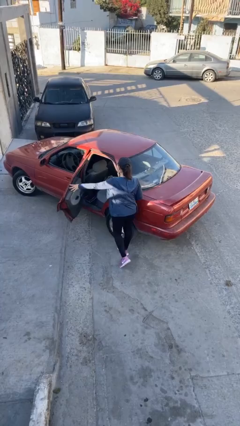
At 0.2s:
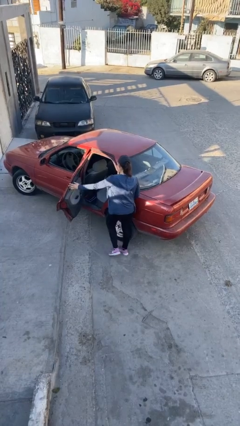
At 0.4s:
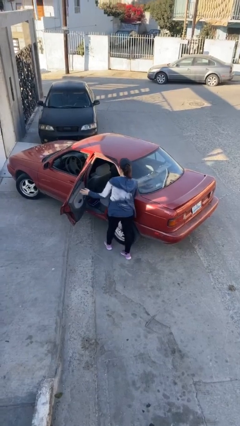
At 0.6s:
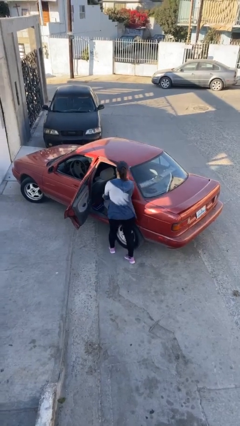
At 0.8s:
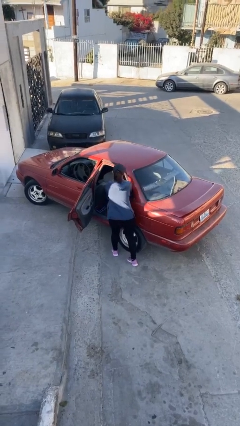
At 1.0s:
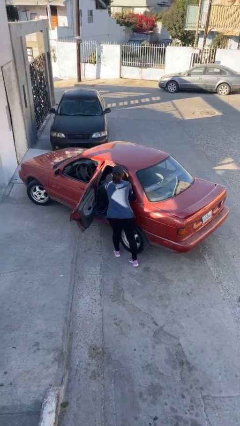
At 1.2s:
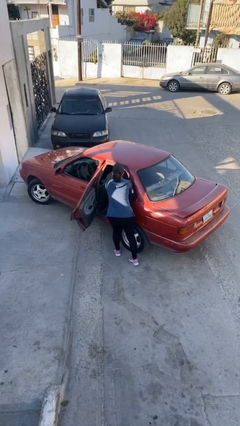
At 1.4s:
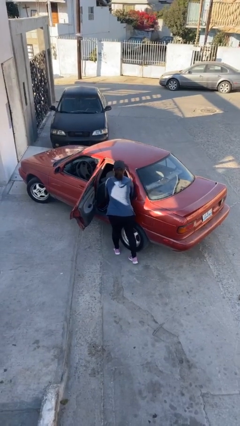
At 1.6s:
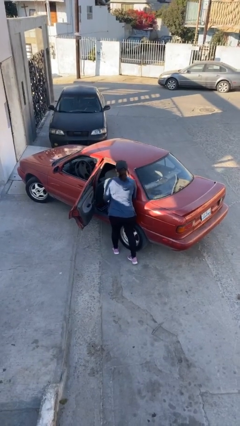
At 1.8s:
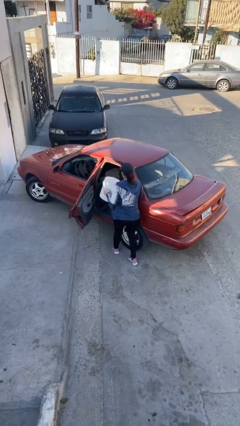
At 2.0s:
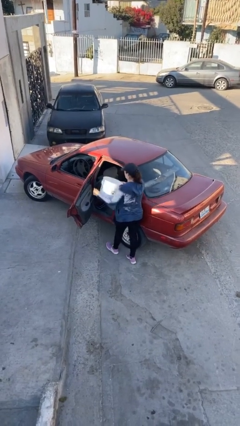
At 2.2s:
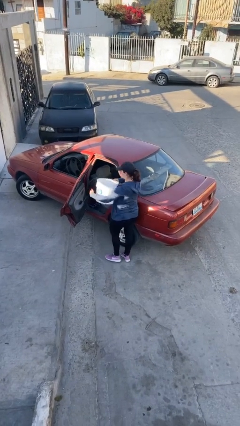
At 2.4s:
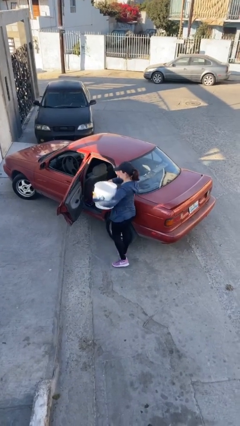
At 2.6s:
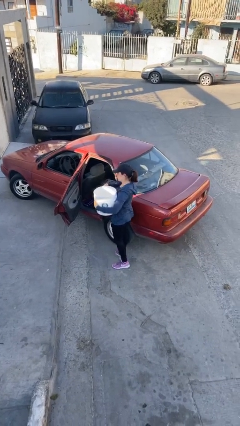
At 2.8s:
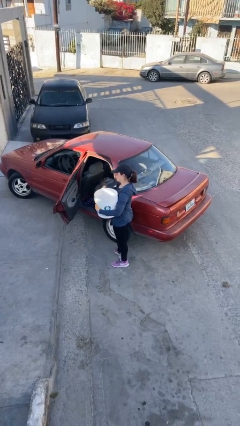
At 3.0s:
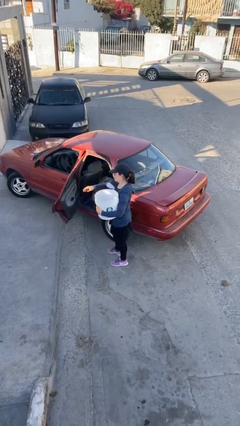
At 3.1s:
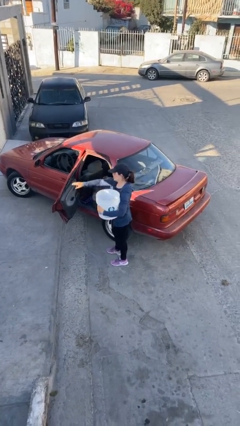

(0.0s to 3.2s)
person unloads car

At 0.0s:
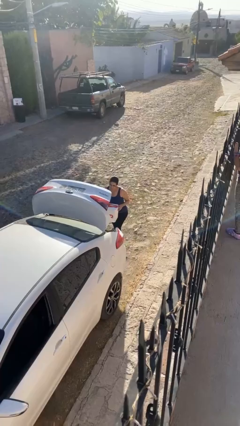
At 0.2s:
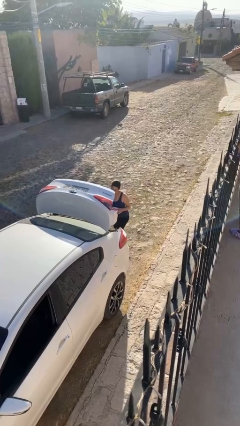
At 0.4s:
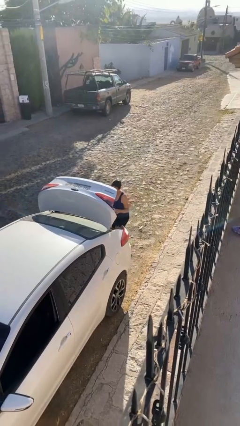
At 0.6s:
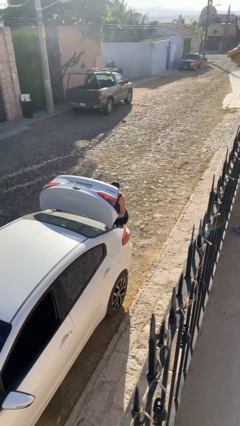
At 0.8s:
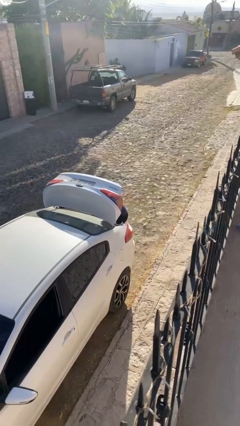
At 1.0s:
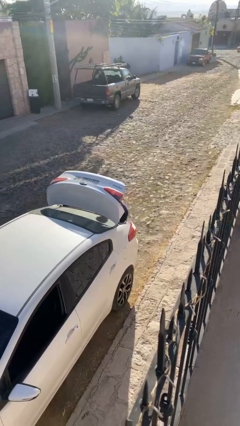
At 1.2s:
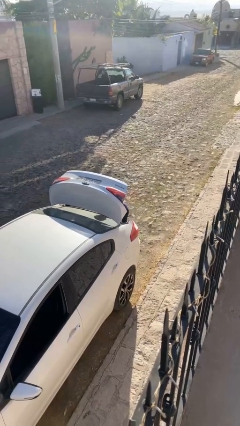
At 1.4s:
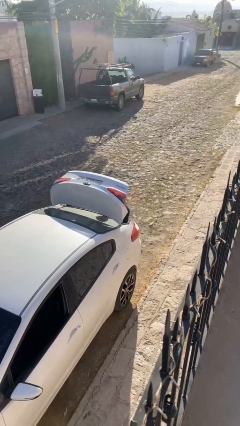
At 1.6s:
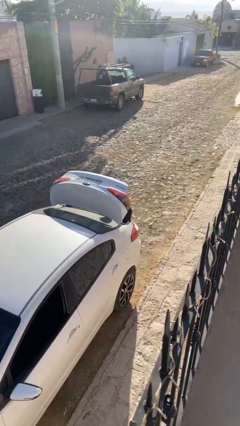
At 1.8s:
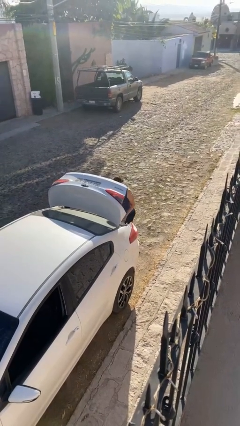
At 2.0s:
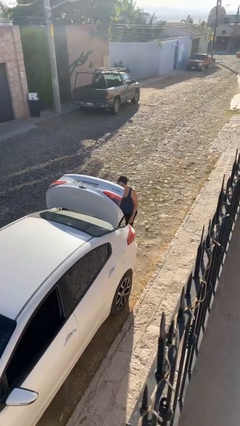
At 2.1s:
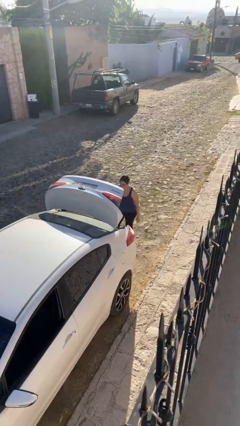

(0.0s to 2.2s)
person loads car

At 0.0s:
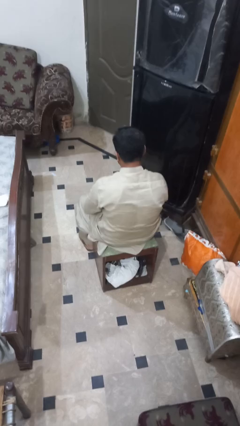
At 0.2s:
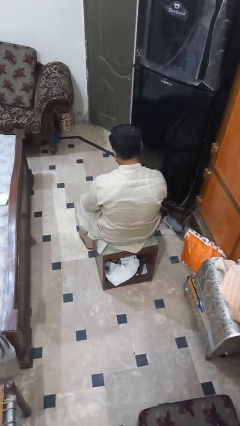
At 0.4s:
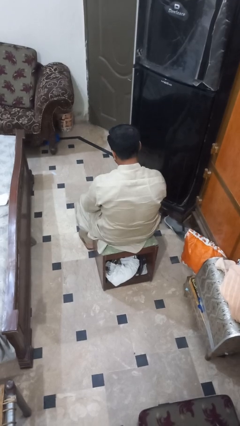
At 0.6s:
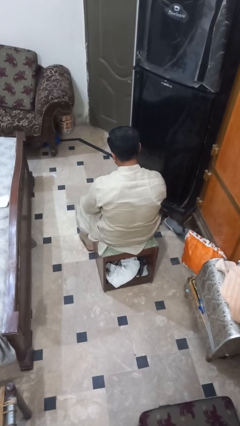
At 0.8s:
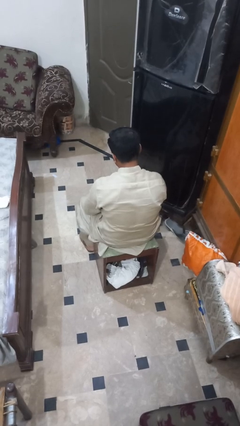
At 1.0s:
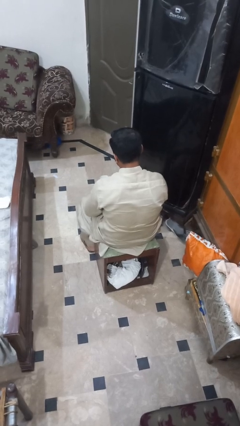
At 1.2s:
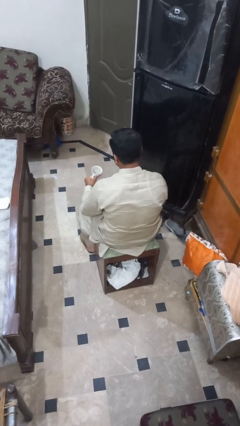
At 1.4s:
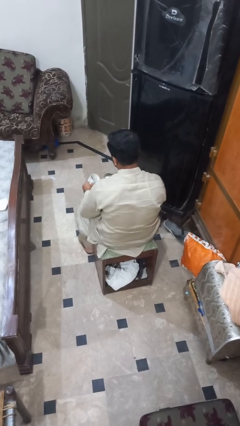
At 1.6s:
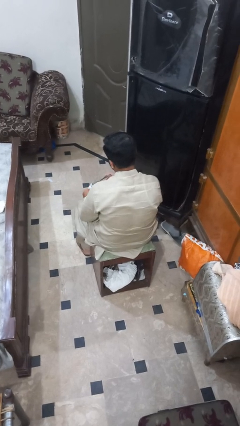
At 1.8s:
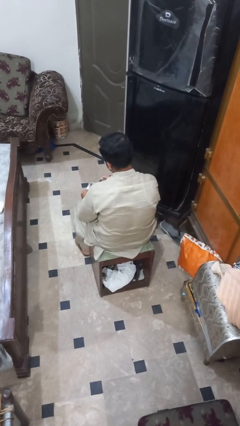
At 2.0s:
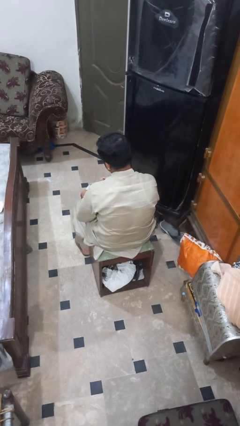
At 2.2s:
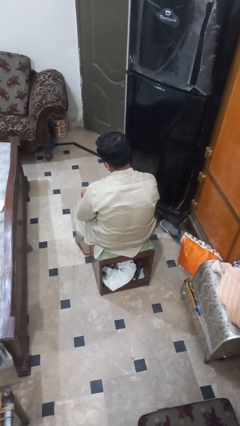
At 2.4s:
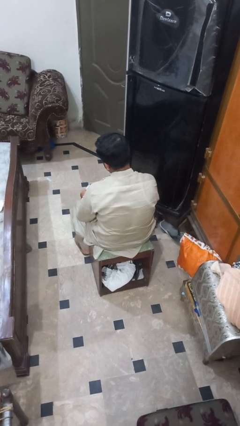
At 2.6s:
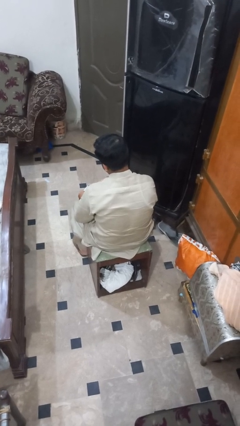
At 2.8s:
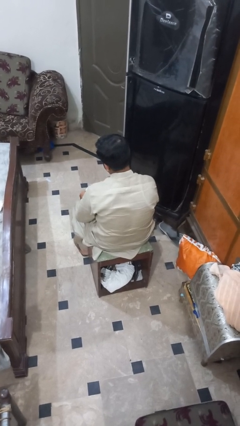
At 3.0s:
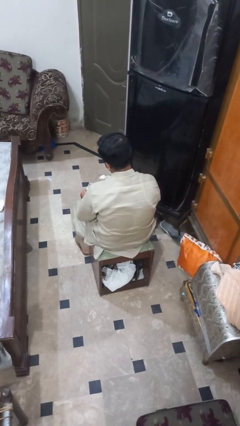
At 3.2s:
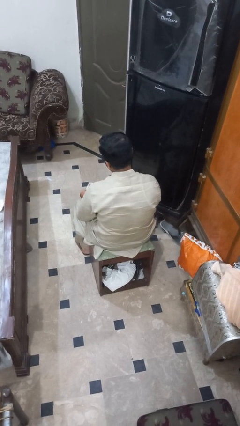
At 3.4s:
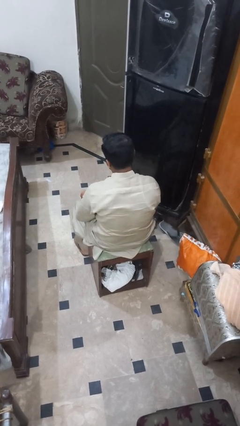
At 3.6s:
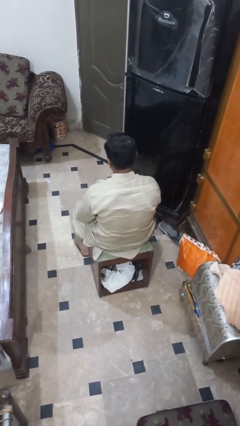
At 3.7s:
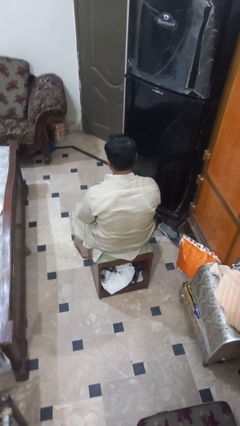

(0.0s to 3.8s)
person stirs mug

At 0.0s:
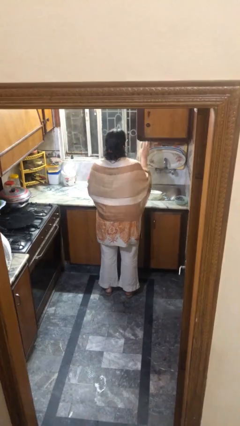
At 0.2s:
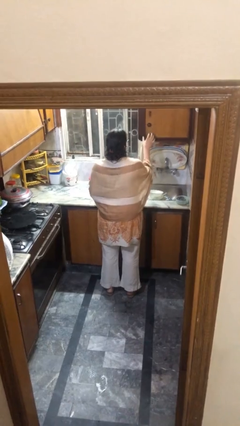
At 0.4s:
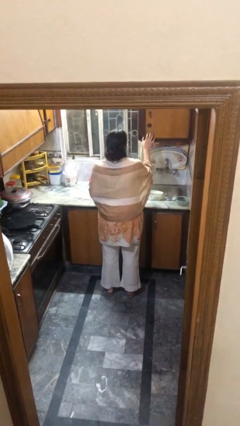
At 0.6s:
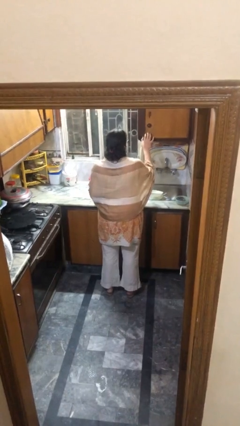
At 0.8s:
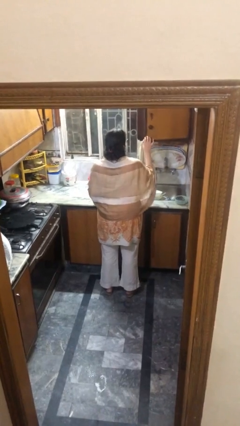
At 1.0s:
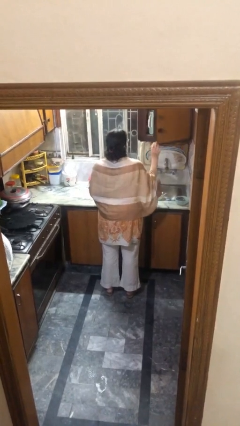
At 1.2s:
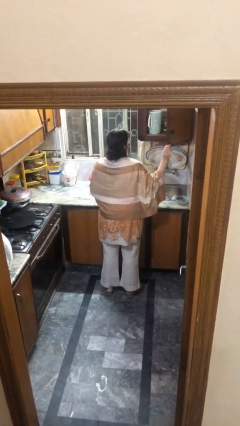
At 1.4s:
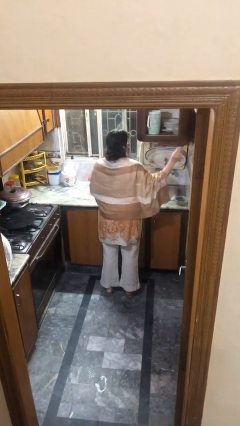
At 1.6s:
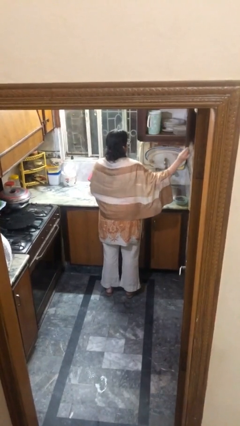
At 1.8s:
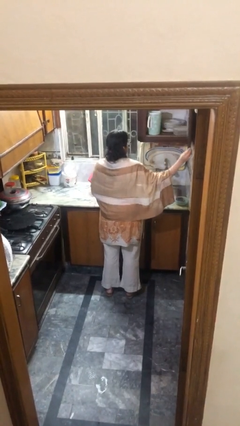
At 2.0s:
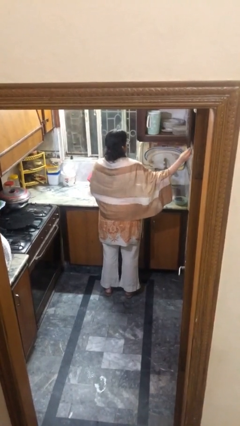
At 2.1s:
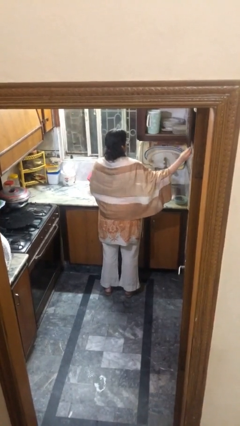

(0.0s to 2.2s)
person opens kitchen drawer

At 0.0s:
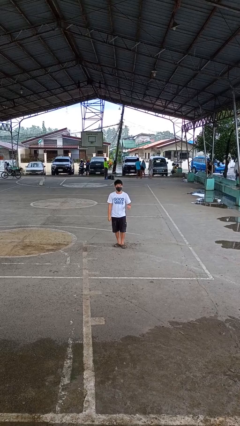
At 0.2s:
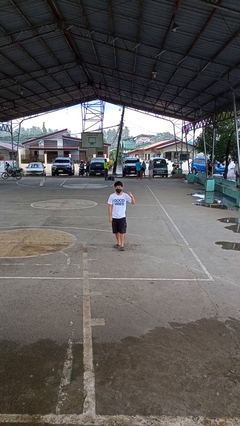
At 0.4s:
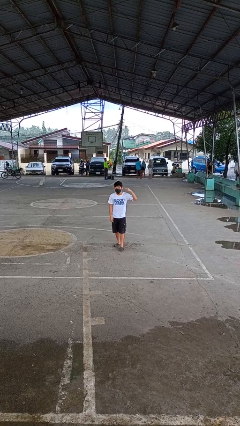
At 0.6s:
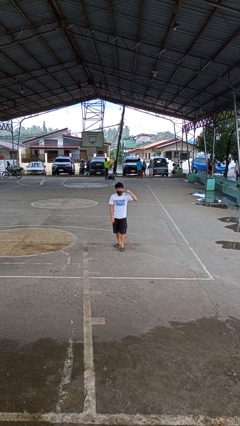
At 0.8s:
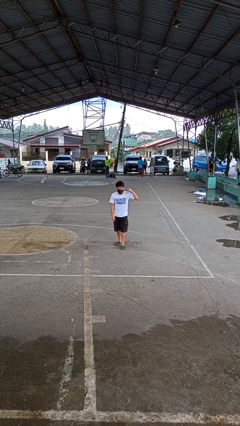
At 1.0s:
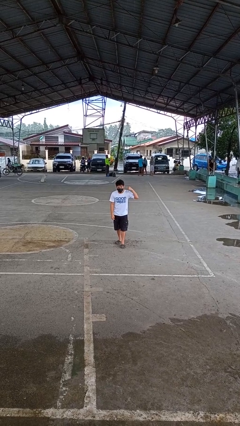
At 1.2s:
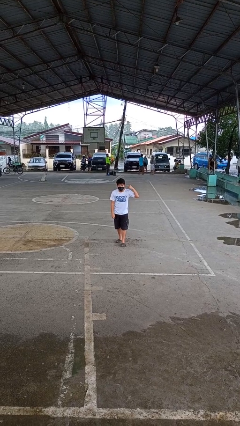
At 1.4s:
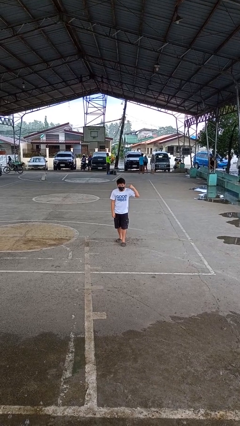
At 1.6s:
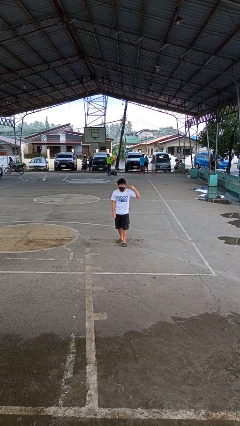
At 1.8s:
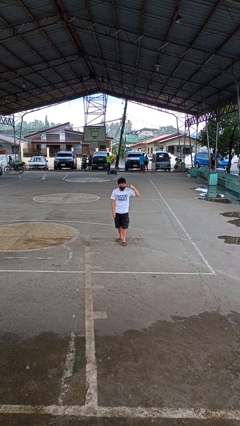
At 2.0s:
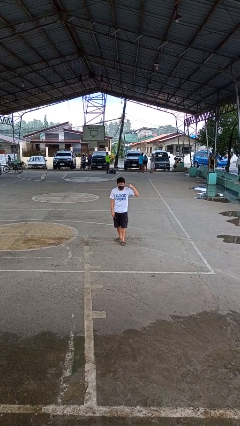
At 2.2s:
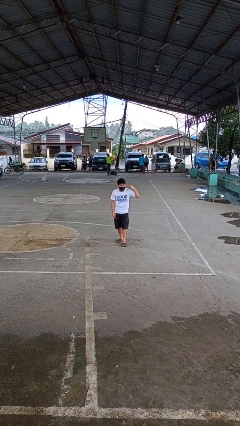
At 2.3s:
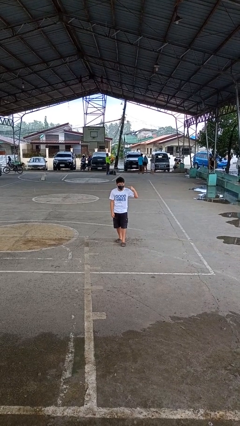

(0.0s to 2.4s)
person gestures listen closely

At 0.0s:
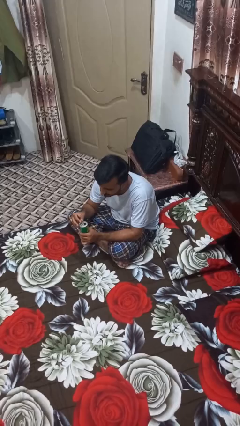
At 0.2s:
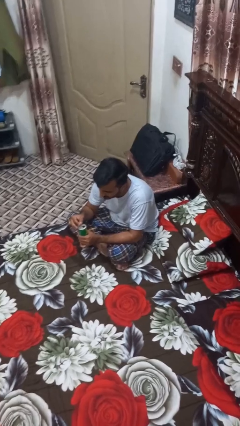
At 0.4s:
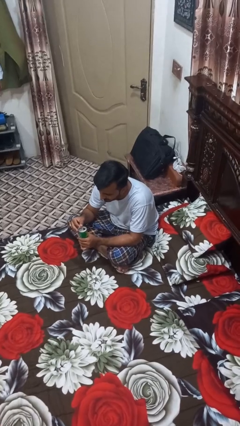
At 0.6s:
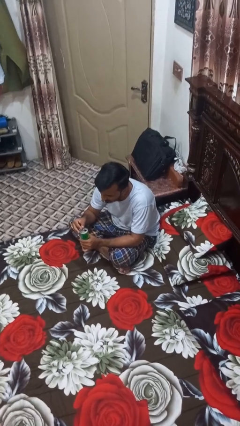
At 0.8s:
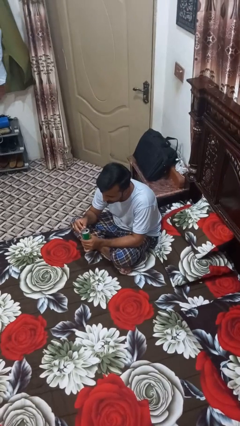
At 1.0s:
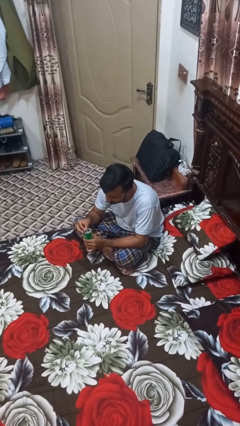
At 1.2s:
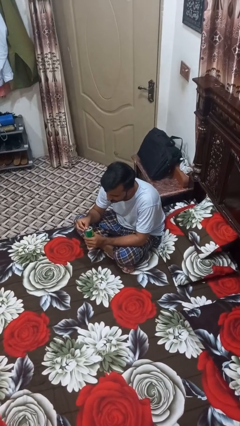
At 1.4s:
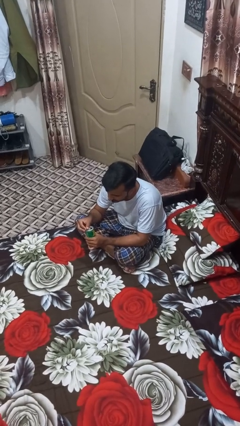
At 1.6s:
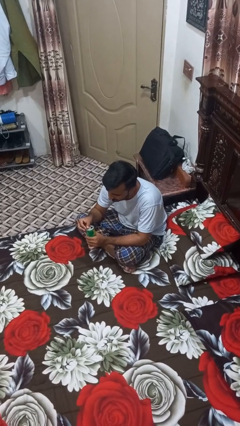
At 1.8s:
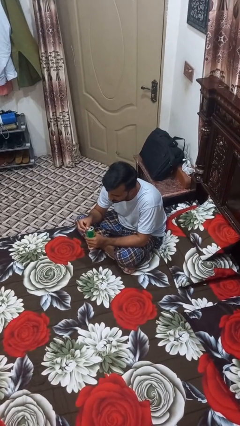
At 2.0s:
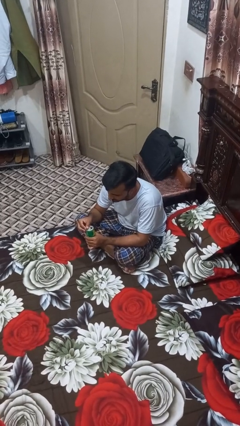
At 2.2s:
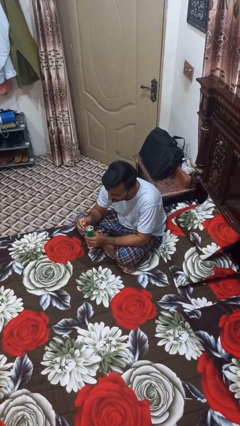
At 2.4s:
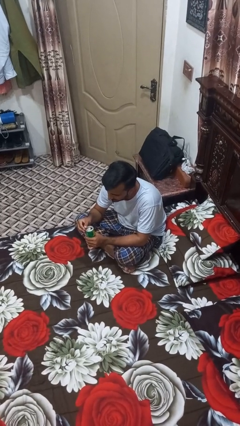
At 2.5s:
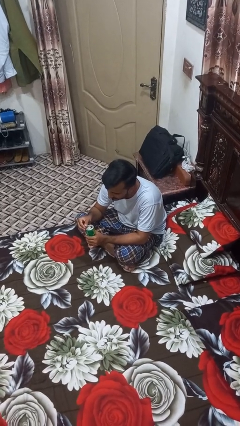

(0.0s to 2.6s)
person opens can with can opener

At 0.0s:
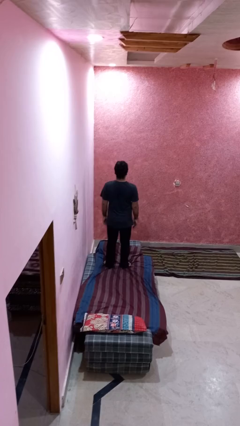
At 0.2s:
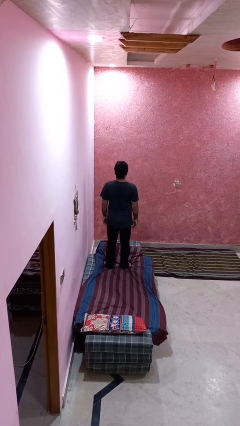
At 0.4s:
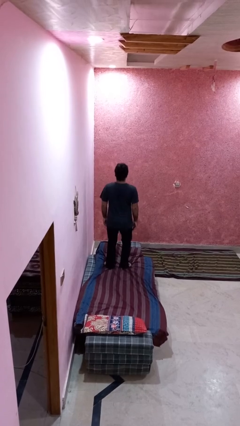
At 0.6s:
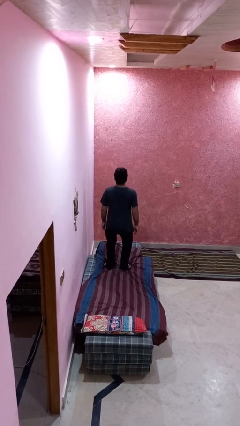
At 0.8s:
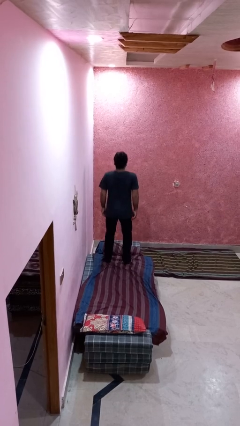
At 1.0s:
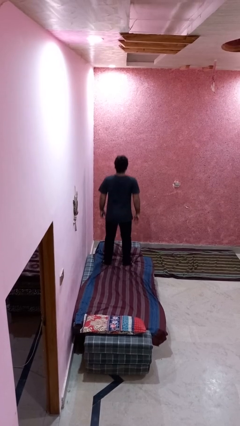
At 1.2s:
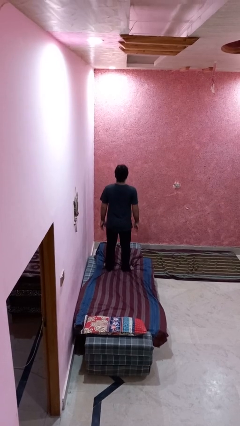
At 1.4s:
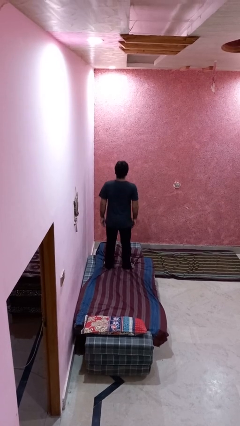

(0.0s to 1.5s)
person jumps on bed
